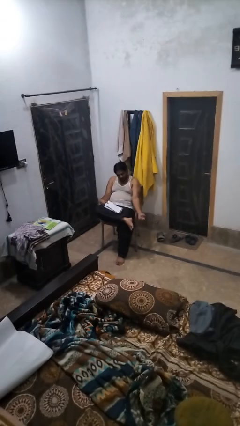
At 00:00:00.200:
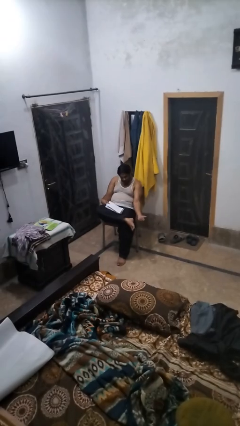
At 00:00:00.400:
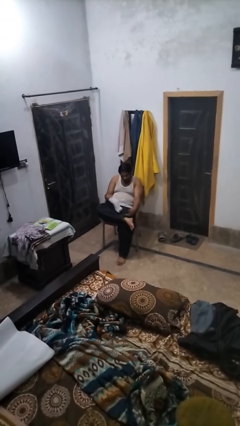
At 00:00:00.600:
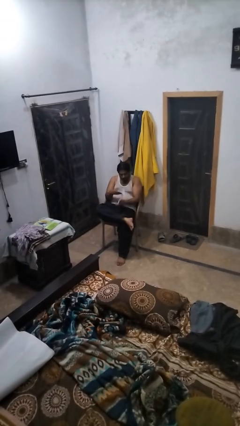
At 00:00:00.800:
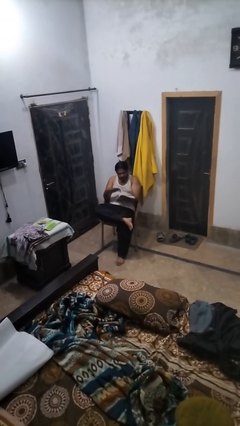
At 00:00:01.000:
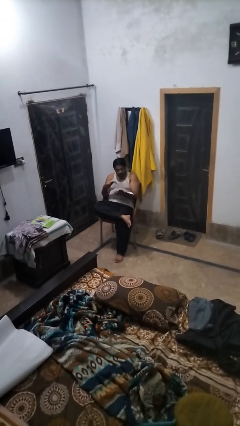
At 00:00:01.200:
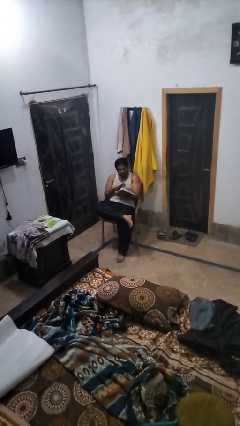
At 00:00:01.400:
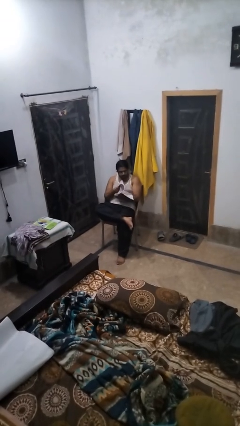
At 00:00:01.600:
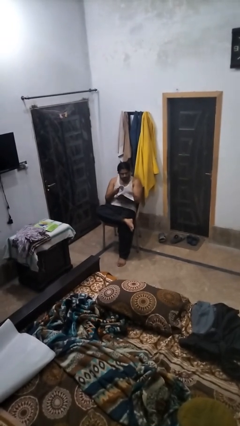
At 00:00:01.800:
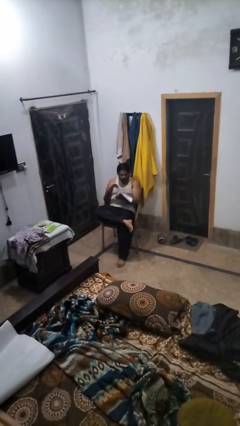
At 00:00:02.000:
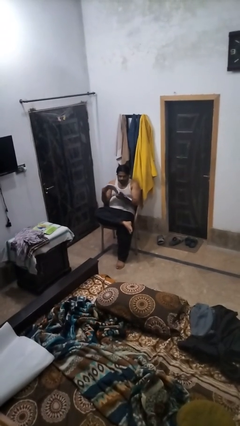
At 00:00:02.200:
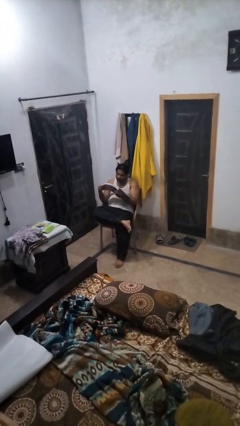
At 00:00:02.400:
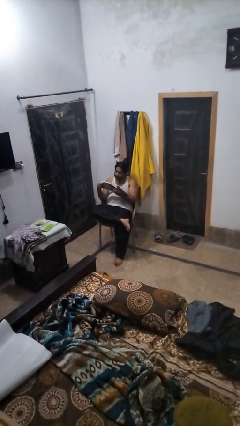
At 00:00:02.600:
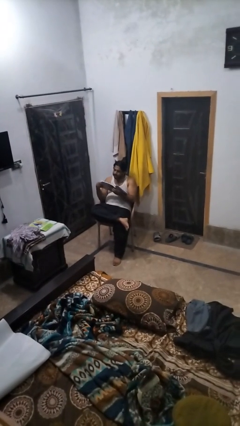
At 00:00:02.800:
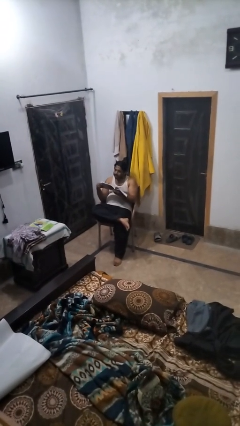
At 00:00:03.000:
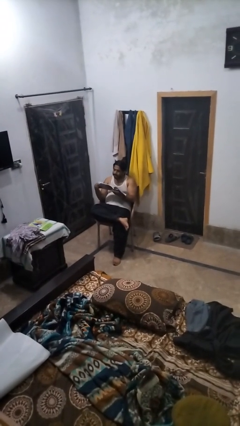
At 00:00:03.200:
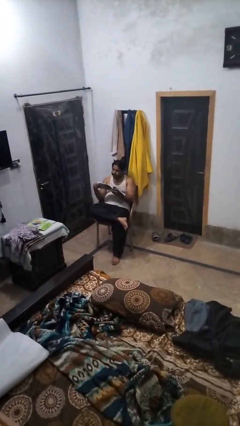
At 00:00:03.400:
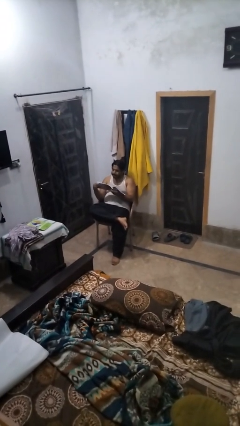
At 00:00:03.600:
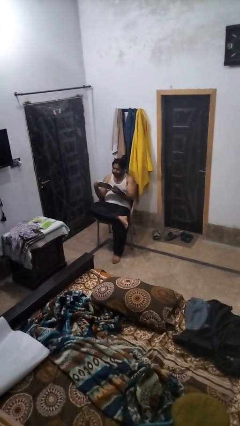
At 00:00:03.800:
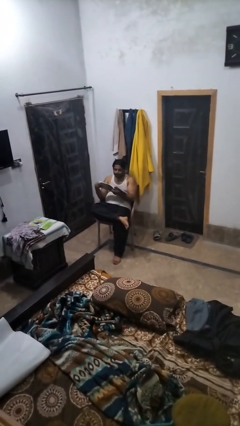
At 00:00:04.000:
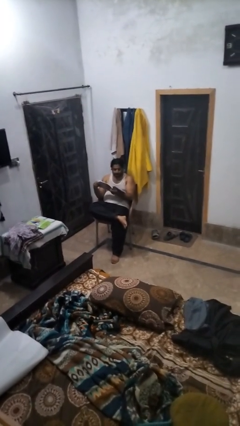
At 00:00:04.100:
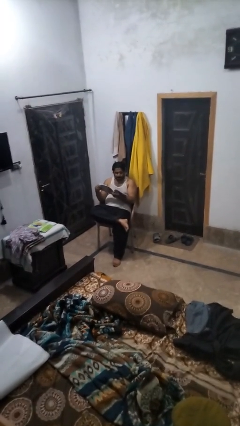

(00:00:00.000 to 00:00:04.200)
person reads book

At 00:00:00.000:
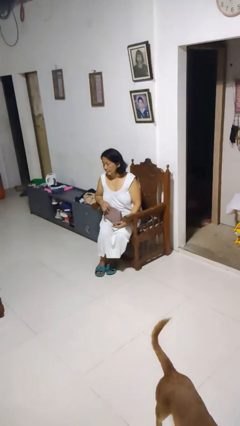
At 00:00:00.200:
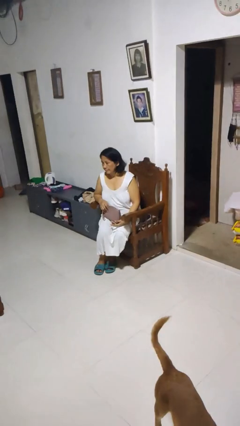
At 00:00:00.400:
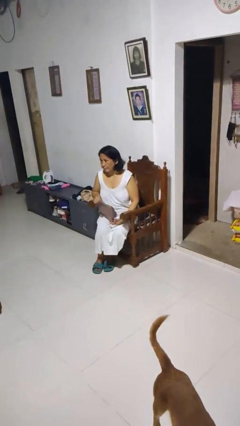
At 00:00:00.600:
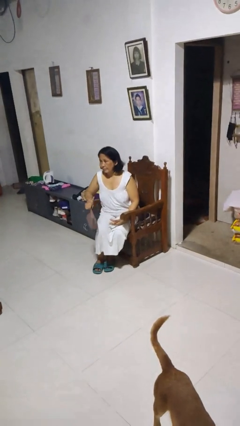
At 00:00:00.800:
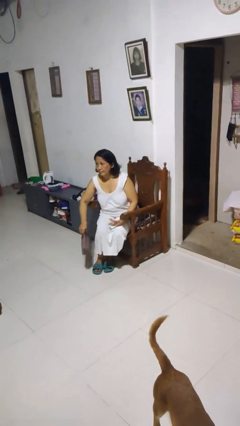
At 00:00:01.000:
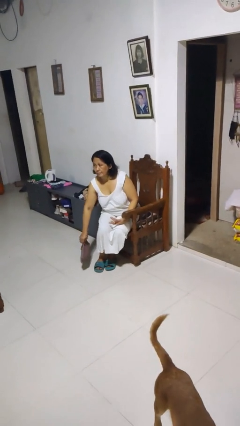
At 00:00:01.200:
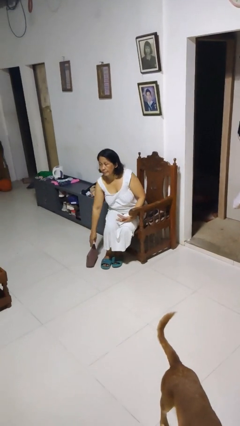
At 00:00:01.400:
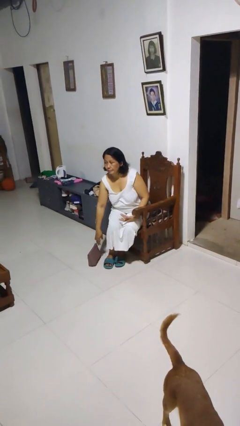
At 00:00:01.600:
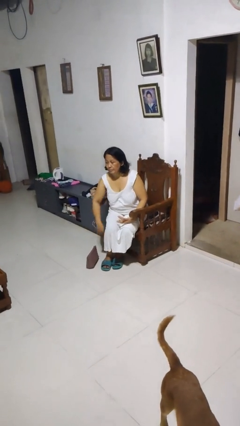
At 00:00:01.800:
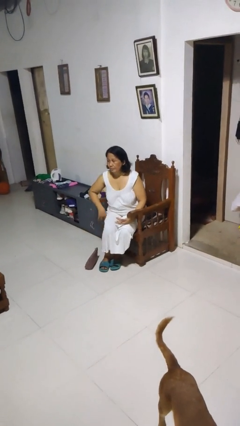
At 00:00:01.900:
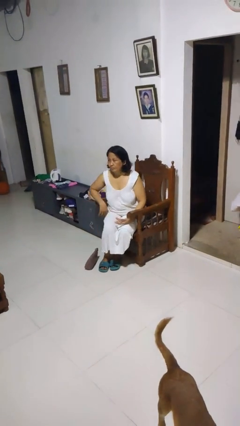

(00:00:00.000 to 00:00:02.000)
person drops object

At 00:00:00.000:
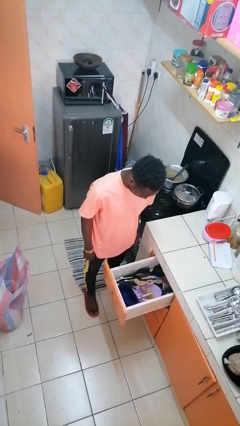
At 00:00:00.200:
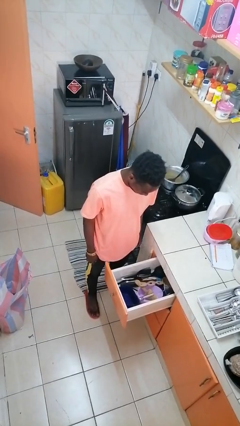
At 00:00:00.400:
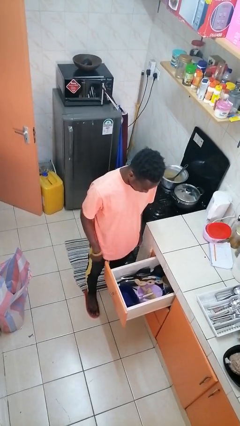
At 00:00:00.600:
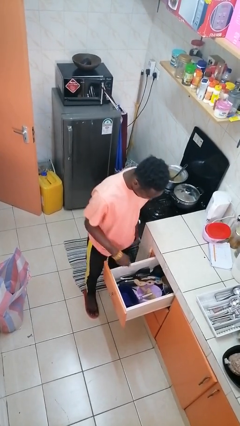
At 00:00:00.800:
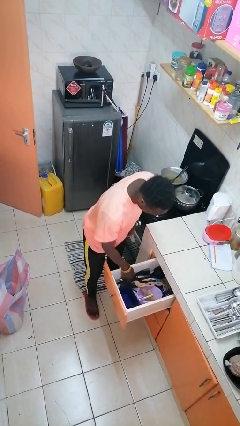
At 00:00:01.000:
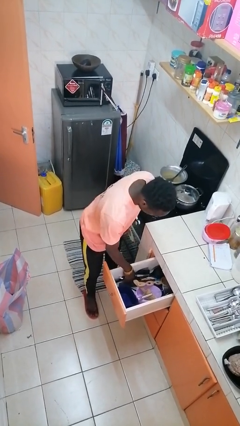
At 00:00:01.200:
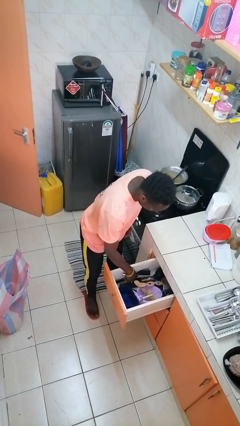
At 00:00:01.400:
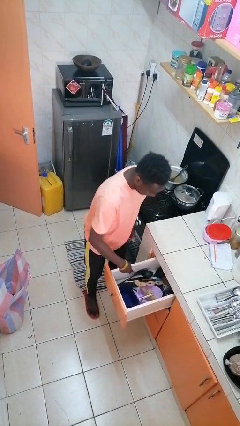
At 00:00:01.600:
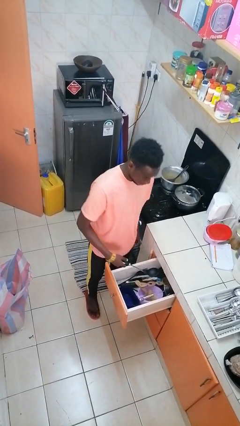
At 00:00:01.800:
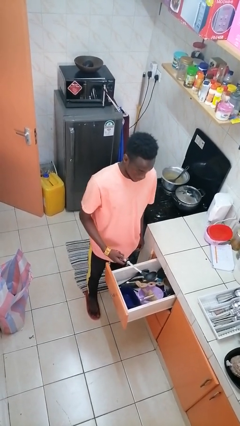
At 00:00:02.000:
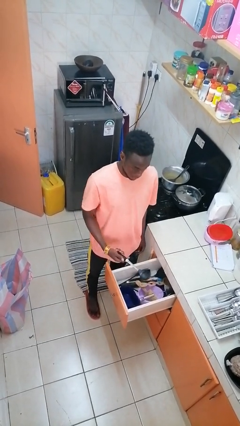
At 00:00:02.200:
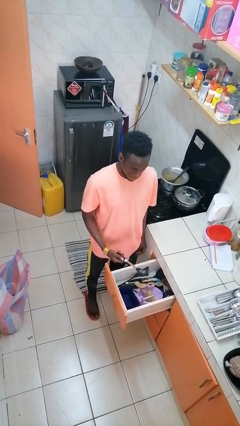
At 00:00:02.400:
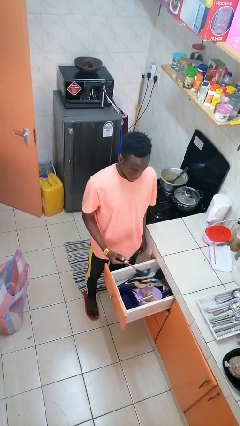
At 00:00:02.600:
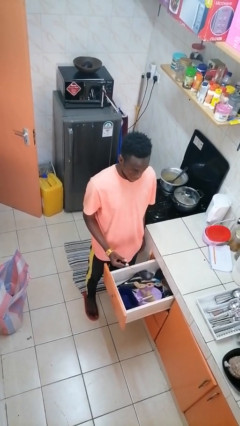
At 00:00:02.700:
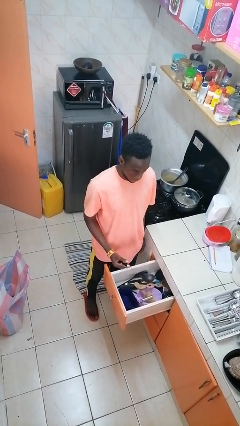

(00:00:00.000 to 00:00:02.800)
person takes object from kitchen drawer

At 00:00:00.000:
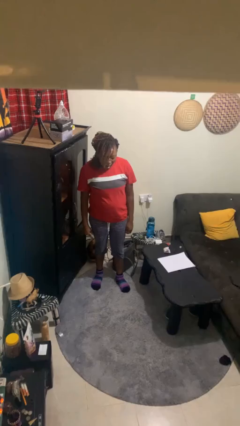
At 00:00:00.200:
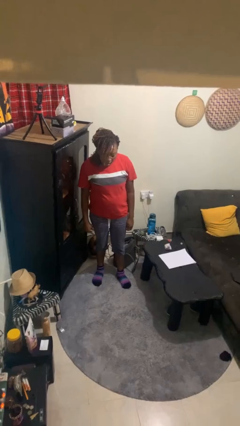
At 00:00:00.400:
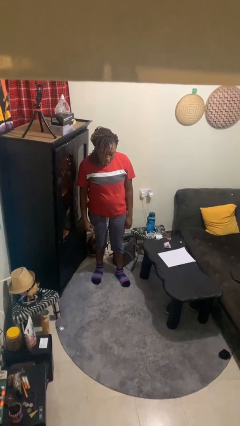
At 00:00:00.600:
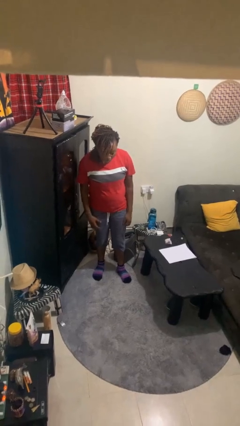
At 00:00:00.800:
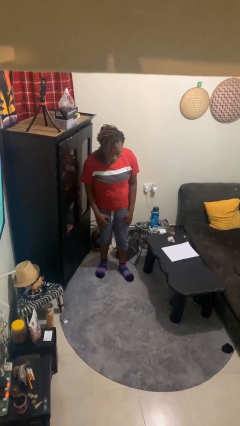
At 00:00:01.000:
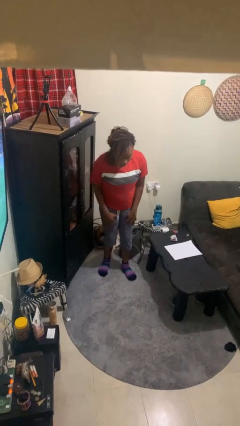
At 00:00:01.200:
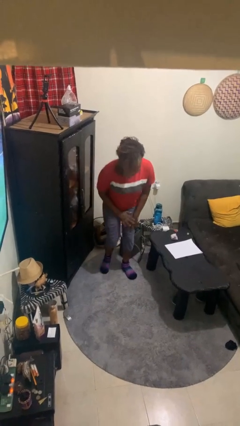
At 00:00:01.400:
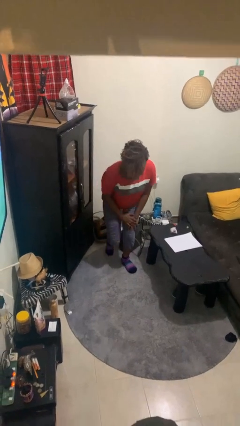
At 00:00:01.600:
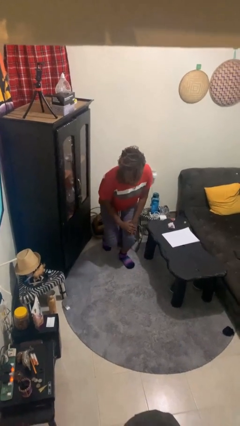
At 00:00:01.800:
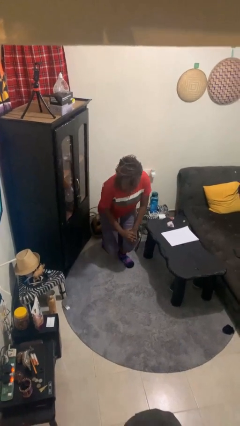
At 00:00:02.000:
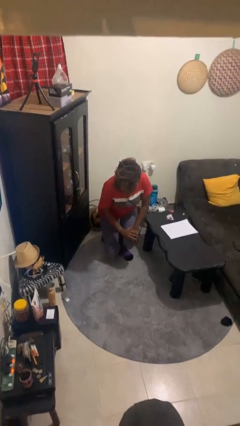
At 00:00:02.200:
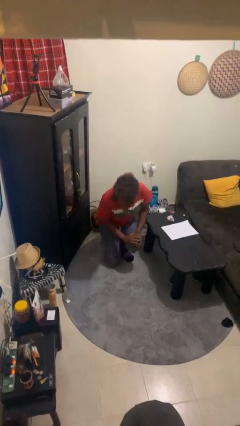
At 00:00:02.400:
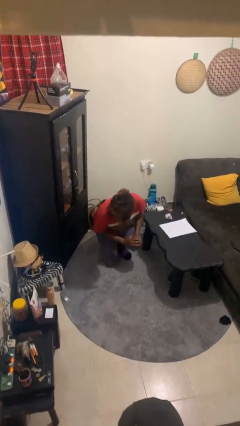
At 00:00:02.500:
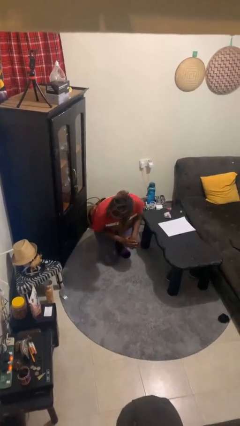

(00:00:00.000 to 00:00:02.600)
person kneels

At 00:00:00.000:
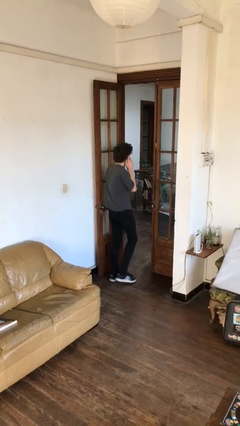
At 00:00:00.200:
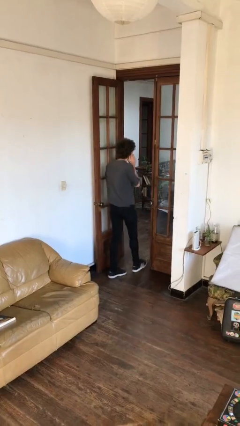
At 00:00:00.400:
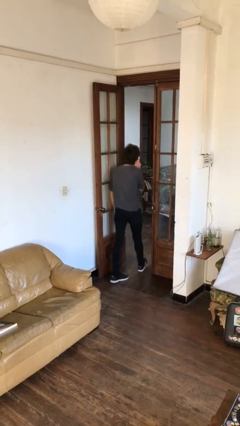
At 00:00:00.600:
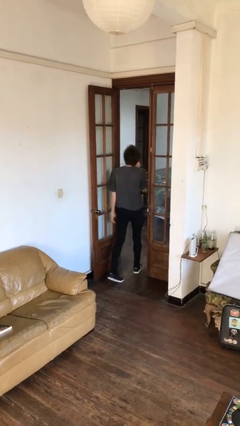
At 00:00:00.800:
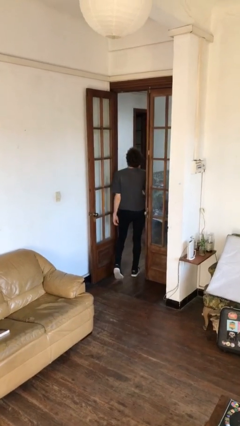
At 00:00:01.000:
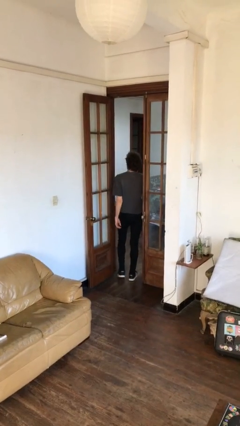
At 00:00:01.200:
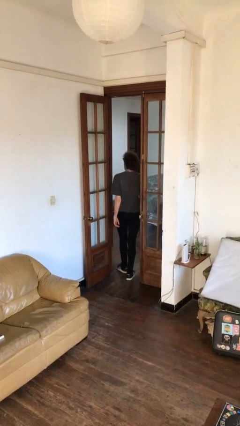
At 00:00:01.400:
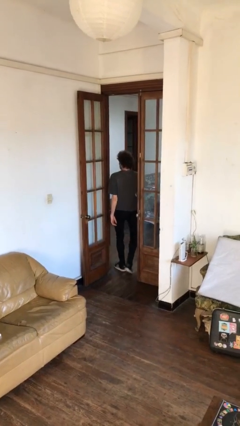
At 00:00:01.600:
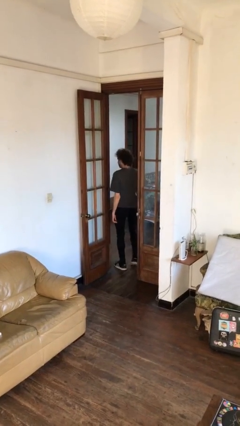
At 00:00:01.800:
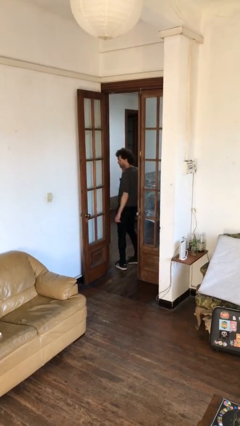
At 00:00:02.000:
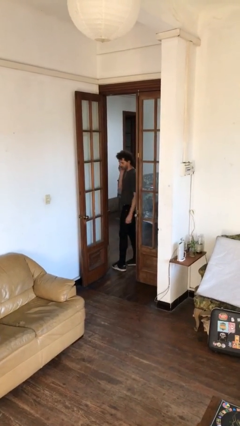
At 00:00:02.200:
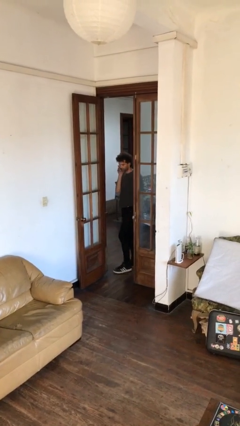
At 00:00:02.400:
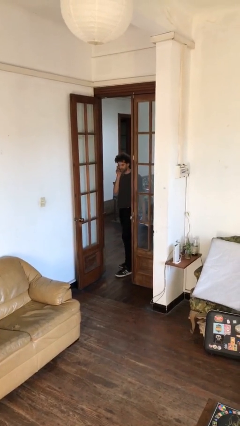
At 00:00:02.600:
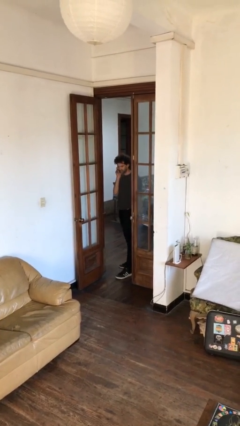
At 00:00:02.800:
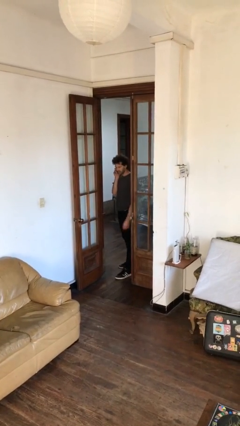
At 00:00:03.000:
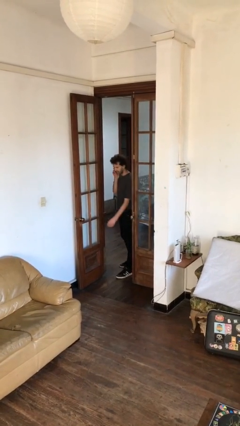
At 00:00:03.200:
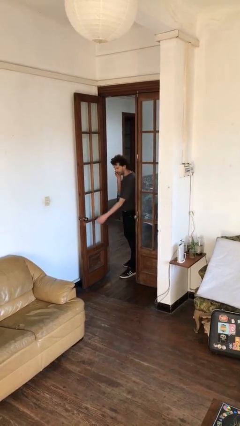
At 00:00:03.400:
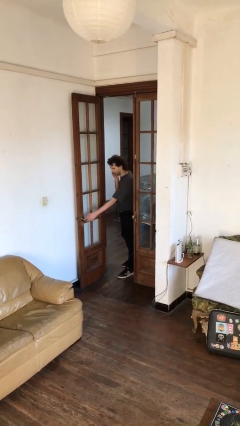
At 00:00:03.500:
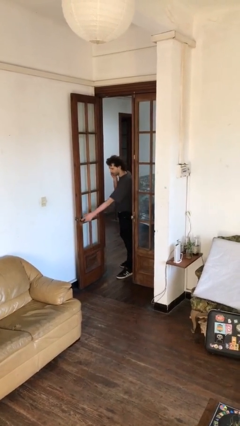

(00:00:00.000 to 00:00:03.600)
person exits scene through structure

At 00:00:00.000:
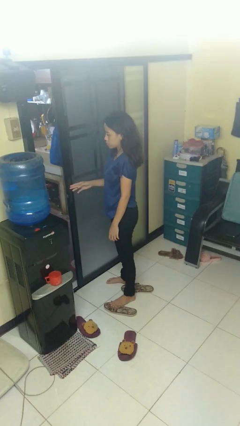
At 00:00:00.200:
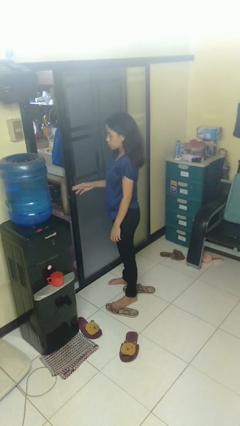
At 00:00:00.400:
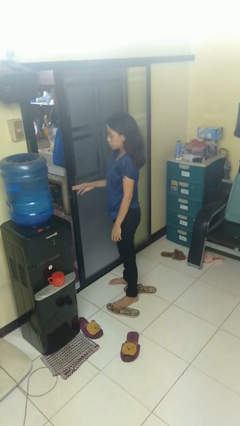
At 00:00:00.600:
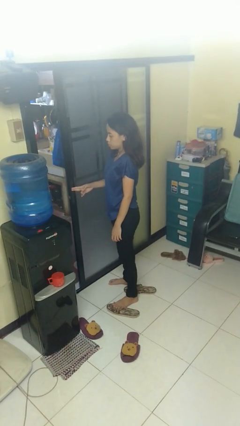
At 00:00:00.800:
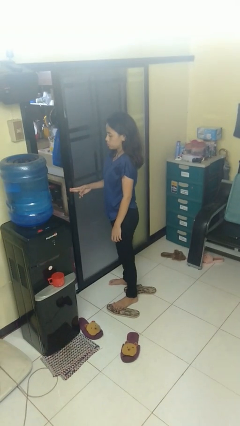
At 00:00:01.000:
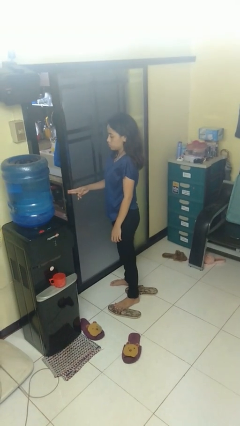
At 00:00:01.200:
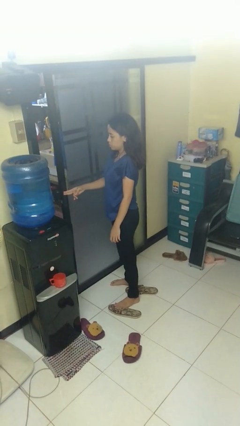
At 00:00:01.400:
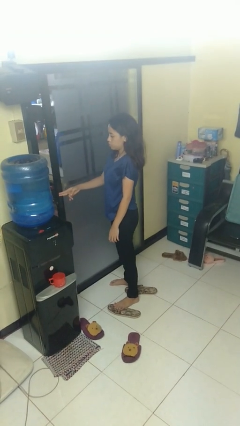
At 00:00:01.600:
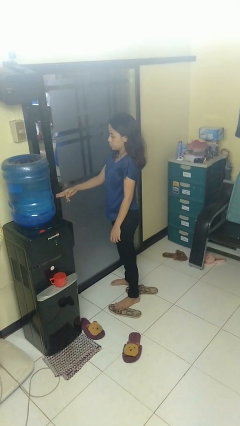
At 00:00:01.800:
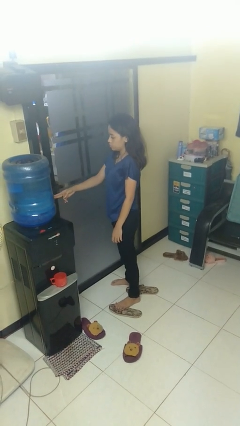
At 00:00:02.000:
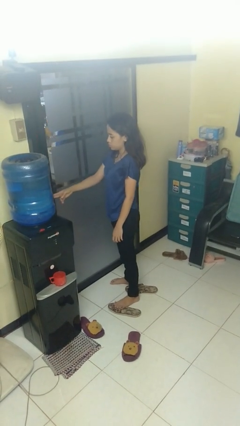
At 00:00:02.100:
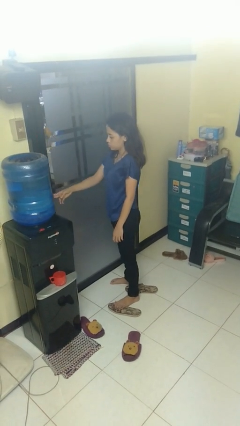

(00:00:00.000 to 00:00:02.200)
person closes sliding door
